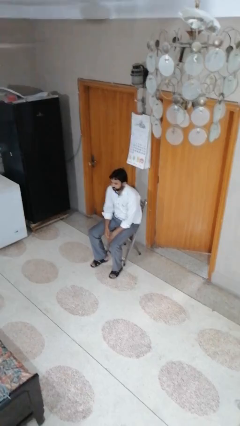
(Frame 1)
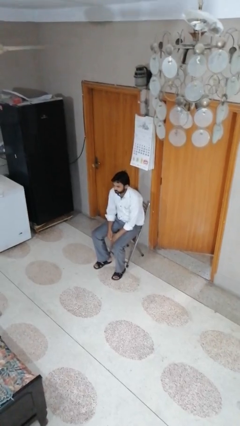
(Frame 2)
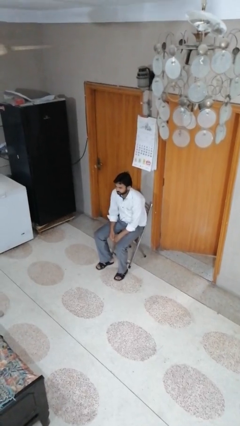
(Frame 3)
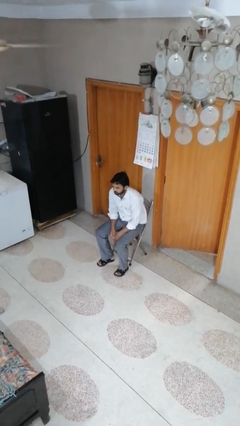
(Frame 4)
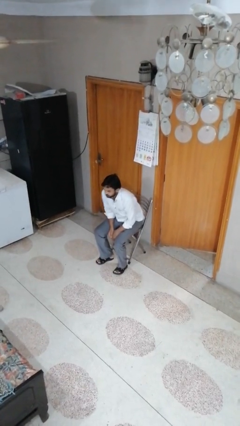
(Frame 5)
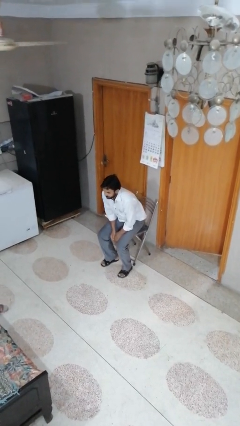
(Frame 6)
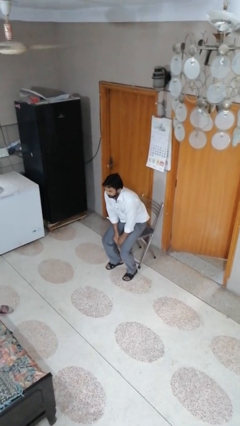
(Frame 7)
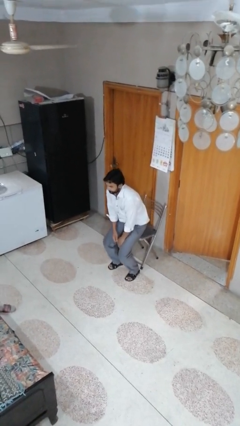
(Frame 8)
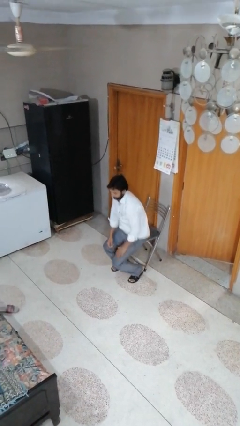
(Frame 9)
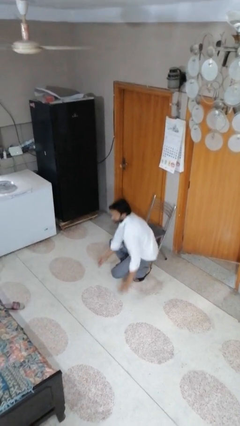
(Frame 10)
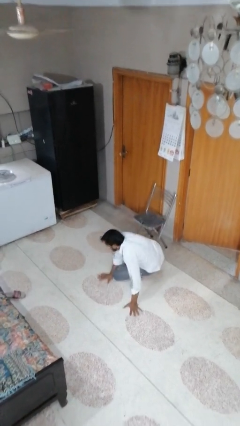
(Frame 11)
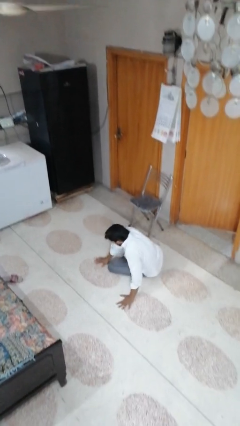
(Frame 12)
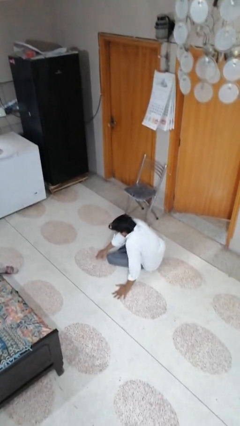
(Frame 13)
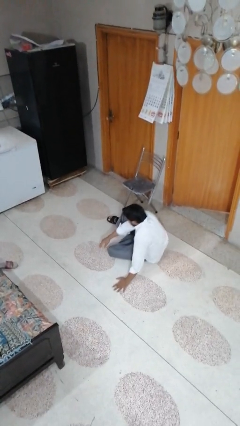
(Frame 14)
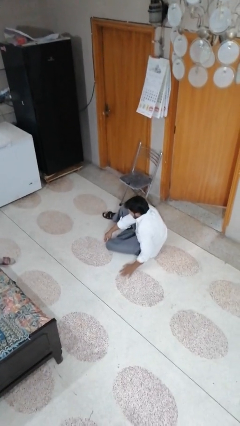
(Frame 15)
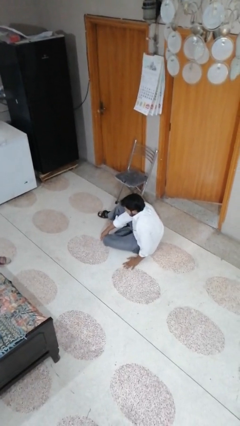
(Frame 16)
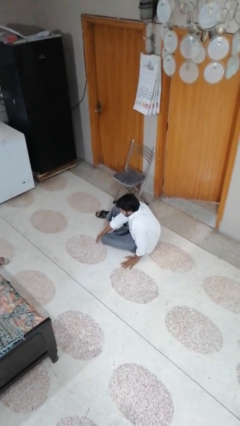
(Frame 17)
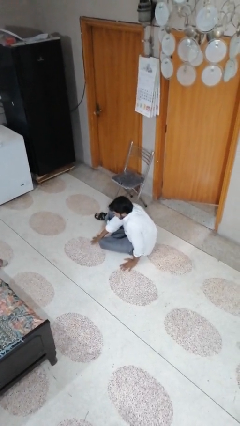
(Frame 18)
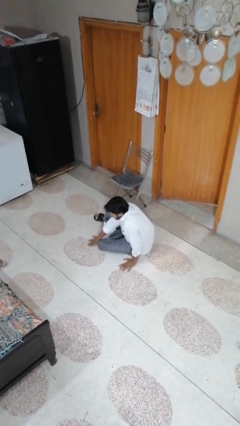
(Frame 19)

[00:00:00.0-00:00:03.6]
person falls from chair

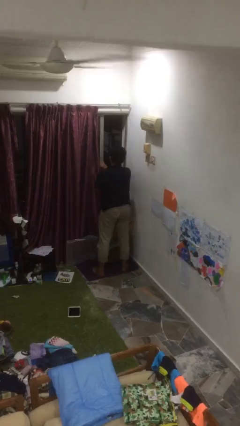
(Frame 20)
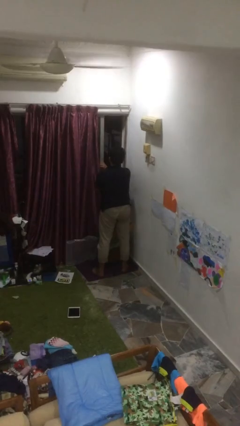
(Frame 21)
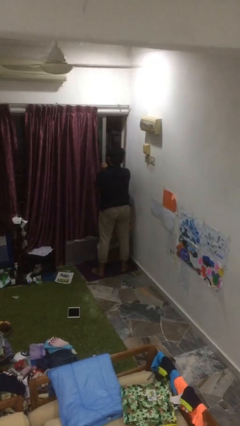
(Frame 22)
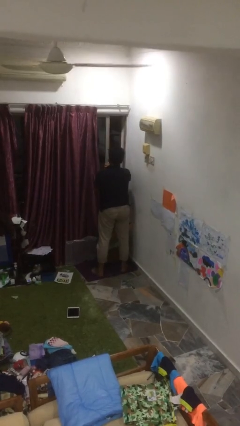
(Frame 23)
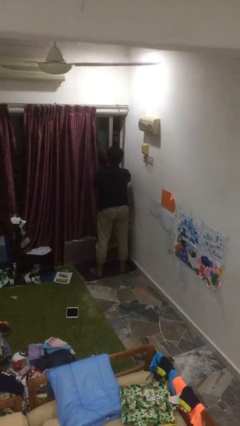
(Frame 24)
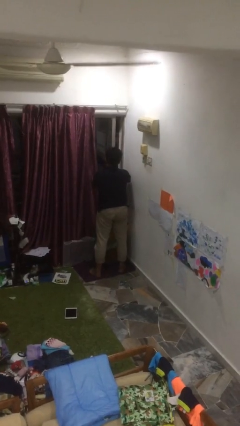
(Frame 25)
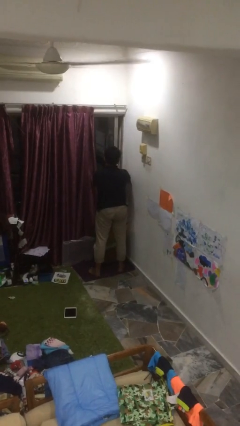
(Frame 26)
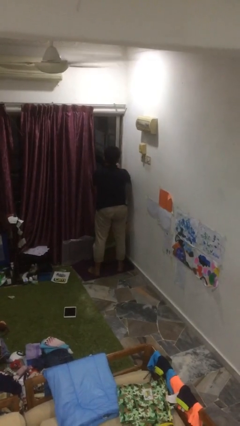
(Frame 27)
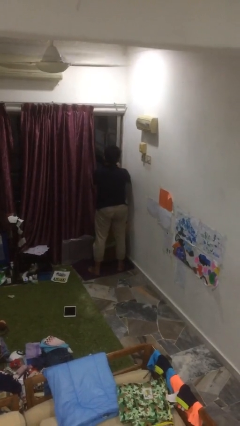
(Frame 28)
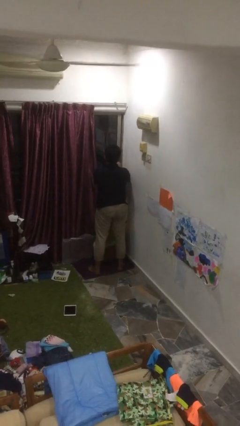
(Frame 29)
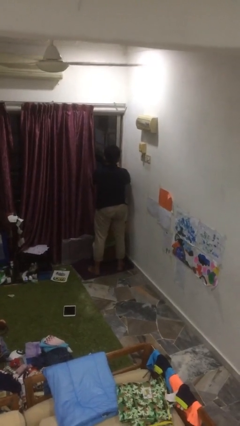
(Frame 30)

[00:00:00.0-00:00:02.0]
person closes home window

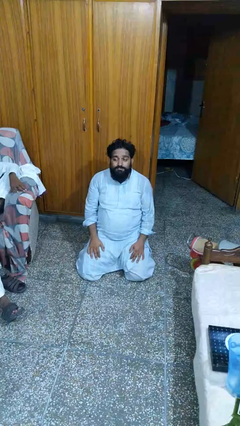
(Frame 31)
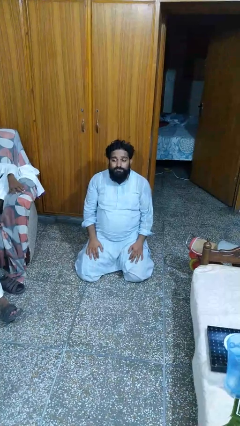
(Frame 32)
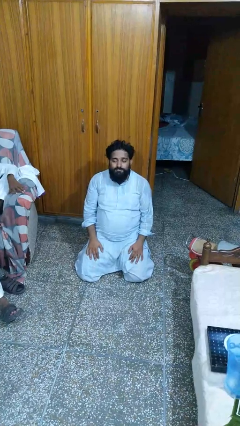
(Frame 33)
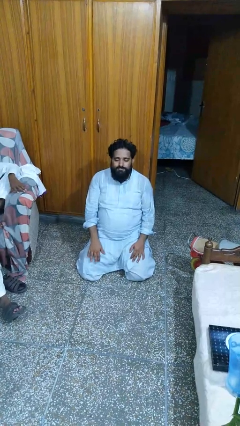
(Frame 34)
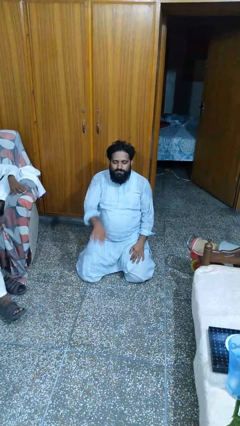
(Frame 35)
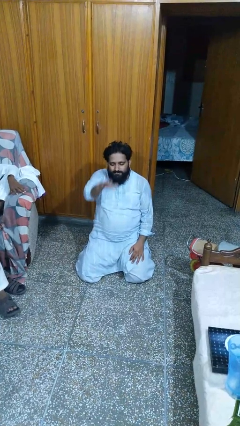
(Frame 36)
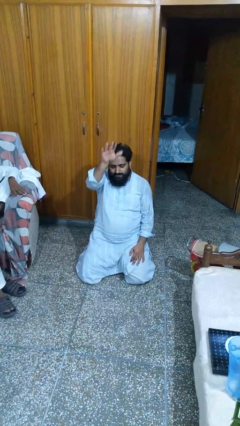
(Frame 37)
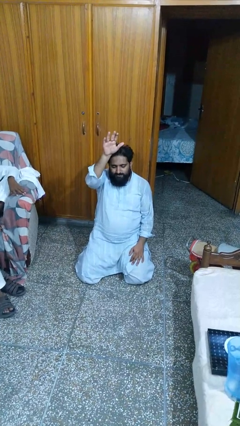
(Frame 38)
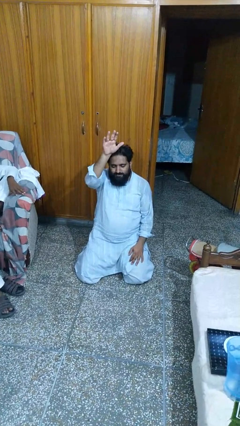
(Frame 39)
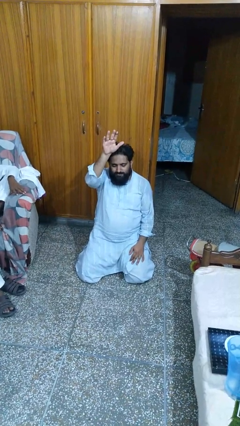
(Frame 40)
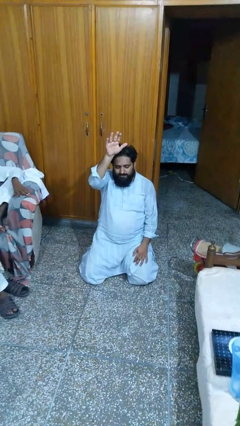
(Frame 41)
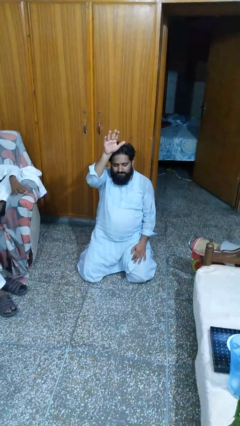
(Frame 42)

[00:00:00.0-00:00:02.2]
person gestures raise hand

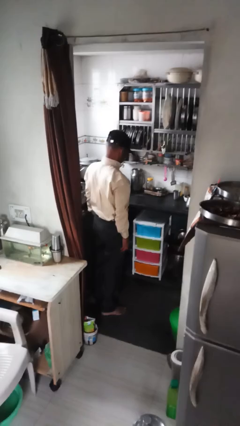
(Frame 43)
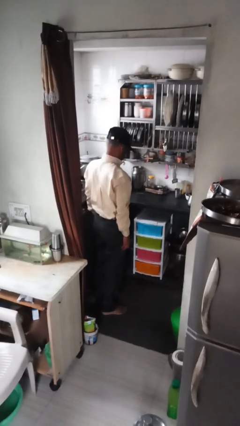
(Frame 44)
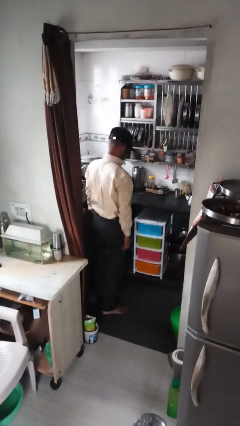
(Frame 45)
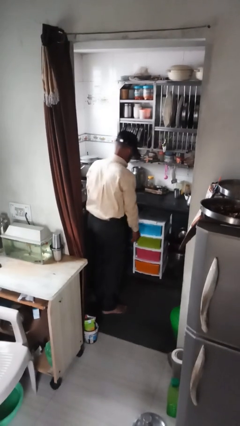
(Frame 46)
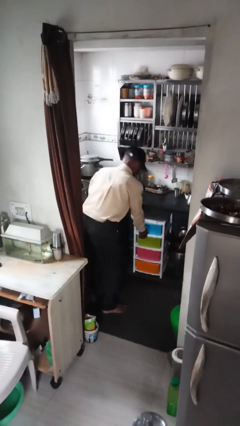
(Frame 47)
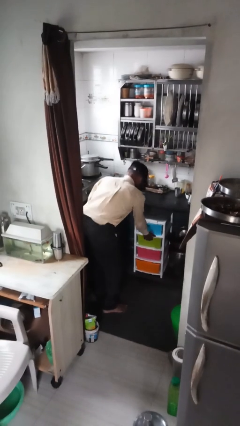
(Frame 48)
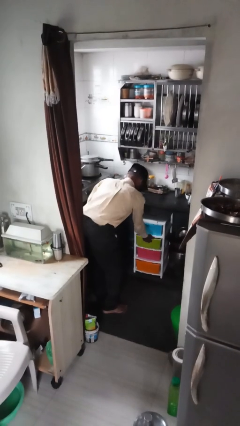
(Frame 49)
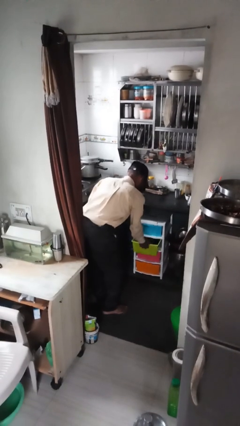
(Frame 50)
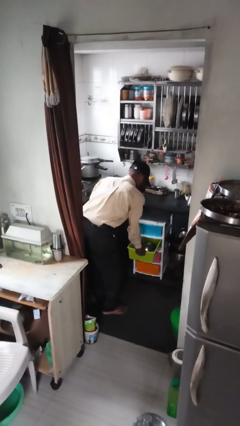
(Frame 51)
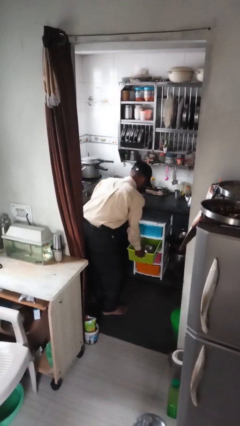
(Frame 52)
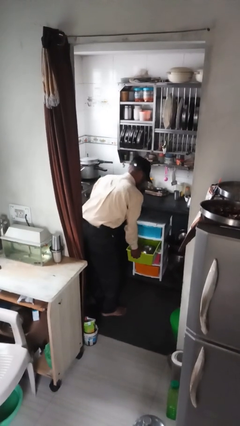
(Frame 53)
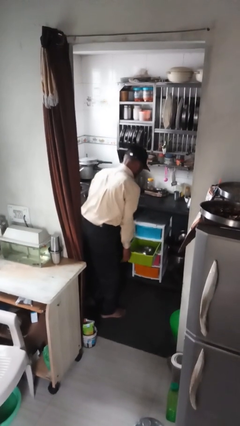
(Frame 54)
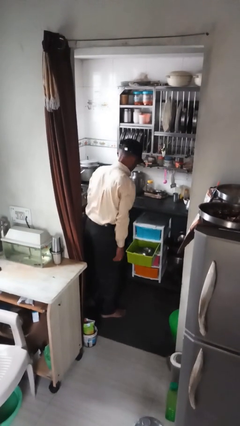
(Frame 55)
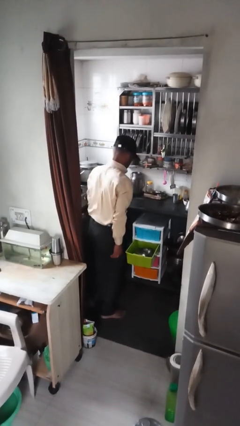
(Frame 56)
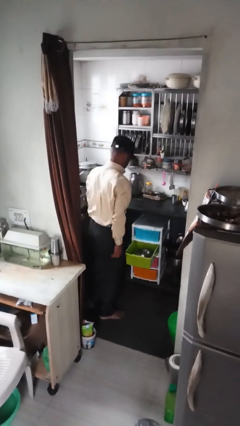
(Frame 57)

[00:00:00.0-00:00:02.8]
person opens kitchen drawer

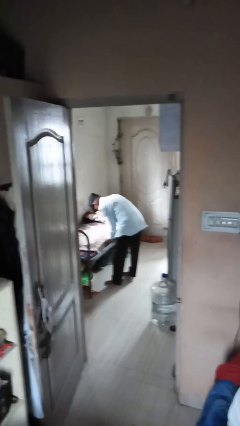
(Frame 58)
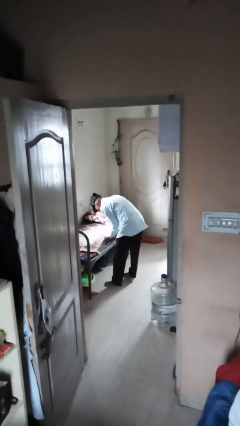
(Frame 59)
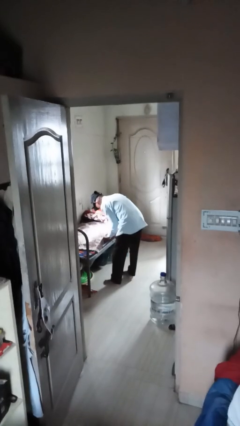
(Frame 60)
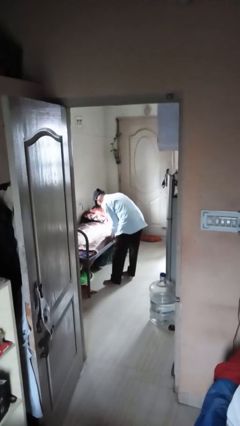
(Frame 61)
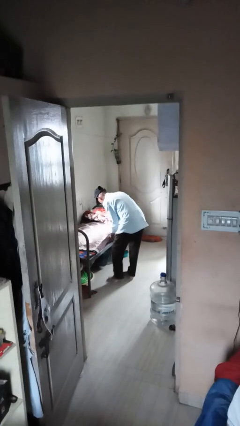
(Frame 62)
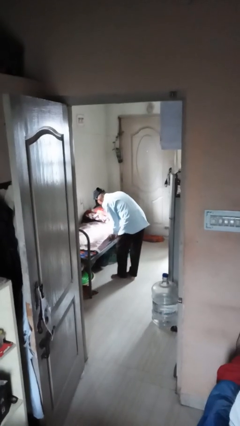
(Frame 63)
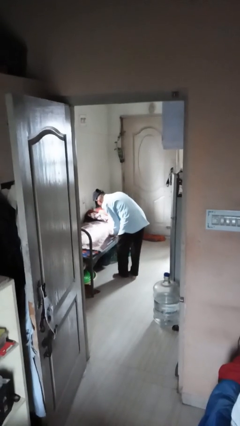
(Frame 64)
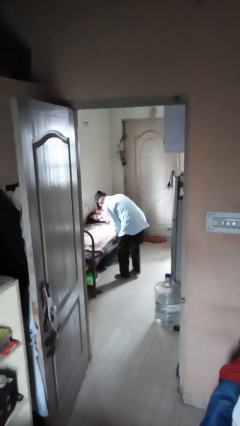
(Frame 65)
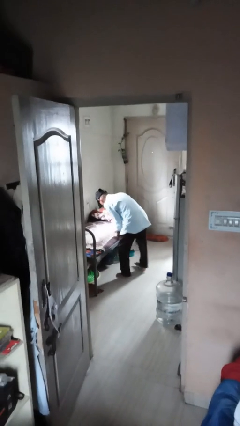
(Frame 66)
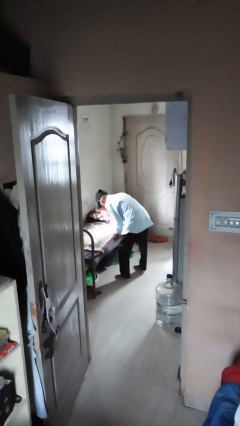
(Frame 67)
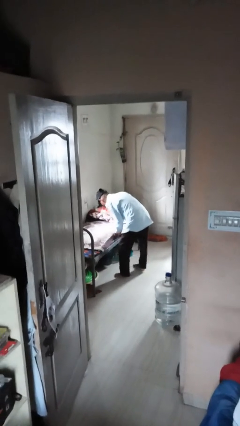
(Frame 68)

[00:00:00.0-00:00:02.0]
person makes bed

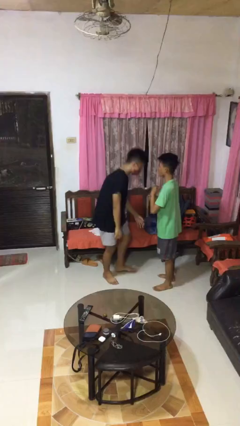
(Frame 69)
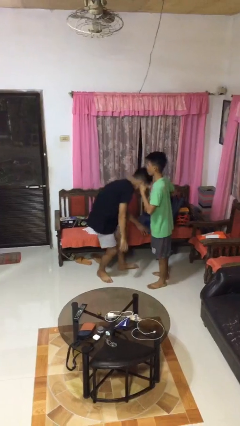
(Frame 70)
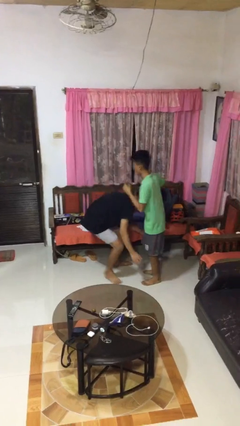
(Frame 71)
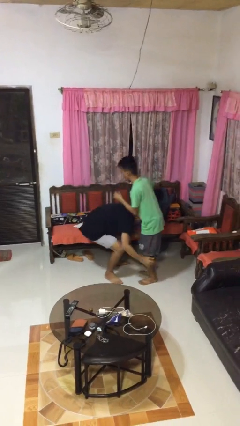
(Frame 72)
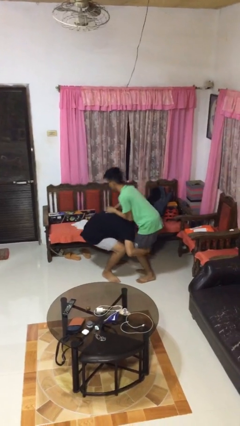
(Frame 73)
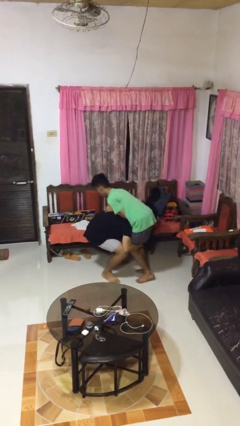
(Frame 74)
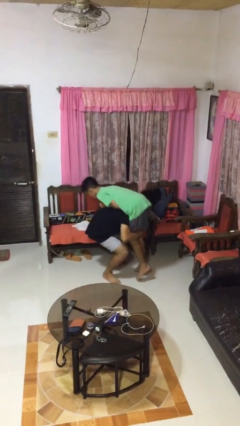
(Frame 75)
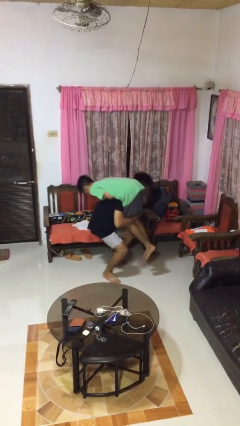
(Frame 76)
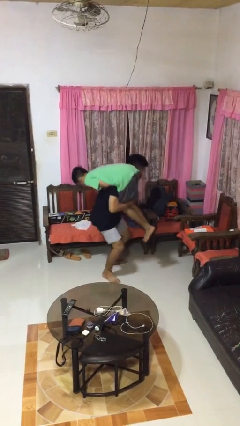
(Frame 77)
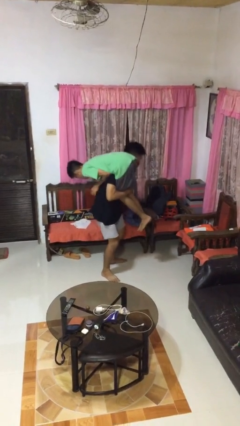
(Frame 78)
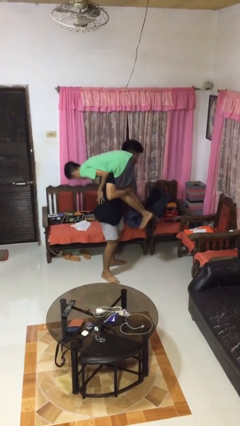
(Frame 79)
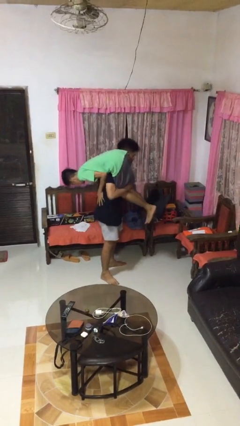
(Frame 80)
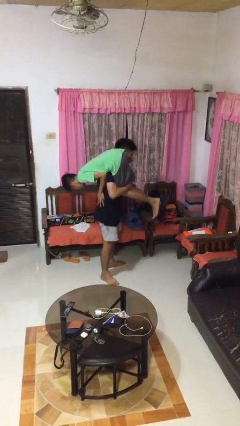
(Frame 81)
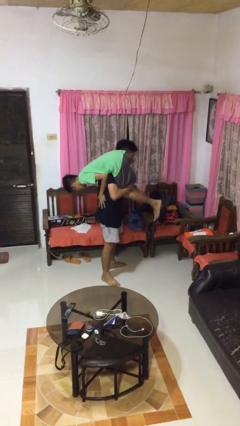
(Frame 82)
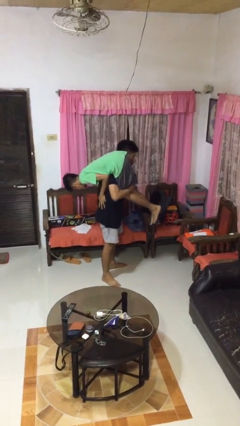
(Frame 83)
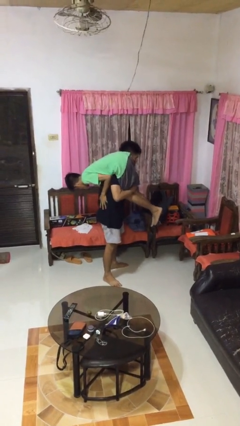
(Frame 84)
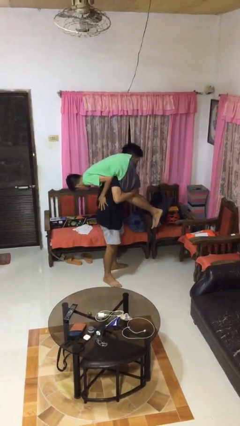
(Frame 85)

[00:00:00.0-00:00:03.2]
person carries person over shoulder

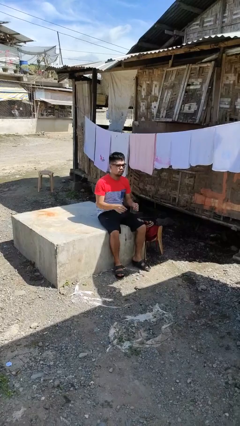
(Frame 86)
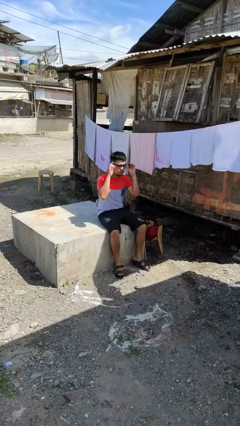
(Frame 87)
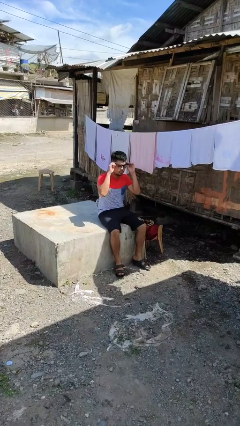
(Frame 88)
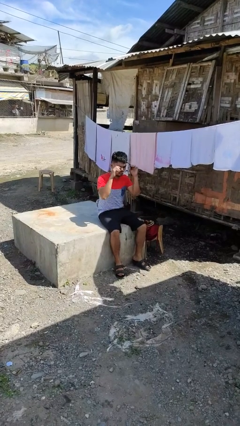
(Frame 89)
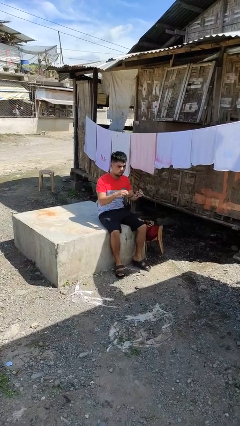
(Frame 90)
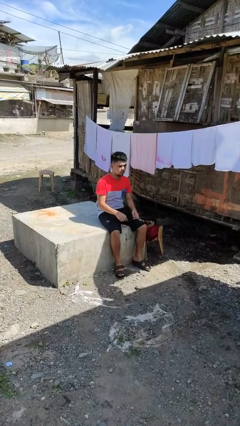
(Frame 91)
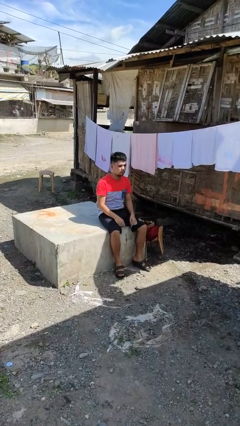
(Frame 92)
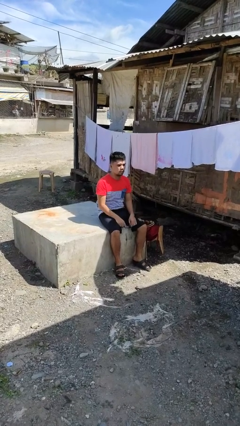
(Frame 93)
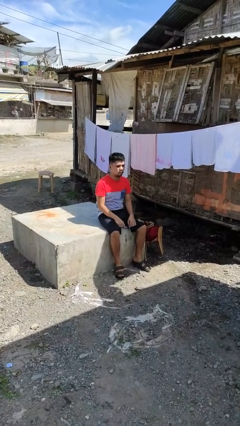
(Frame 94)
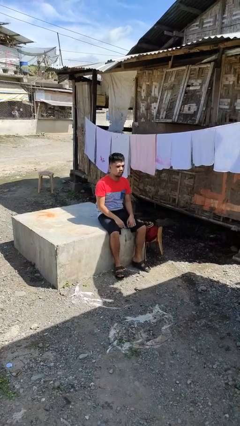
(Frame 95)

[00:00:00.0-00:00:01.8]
person takes off glasses
